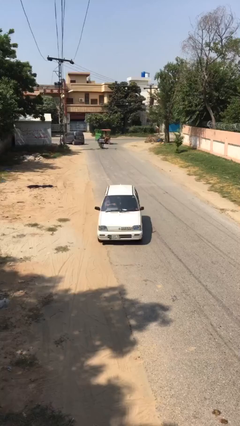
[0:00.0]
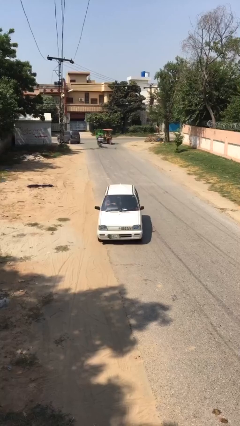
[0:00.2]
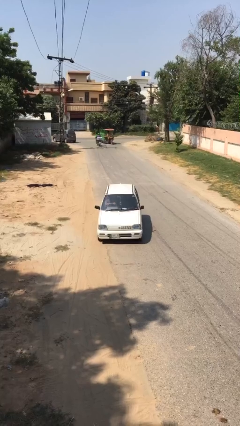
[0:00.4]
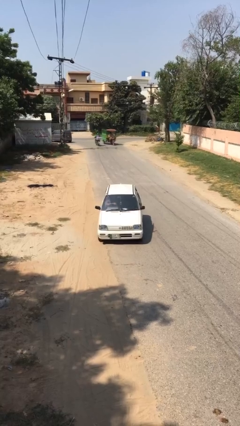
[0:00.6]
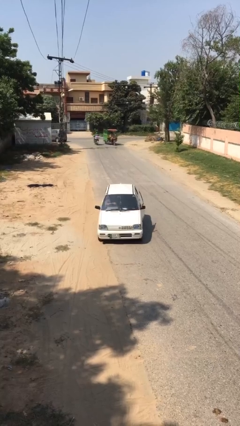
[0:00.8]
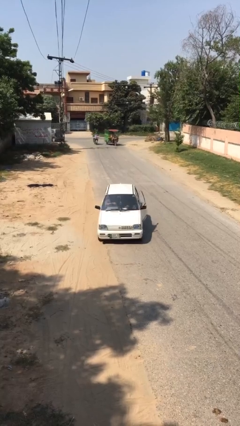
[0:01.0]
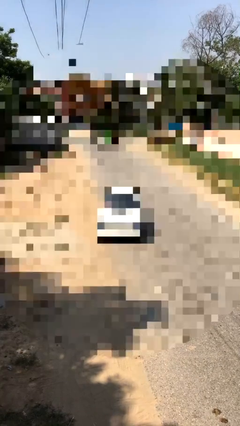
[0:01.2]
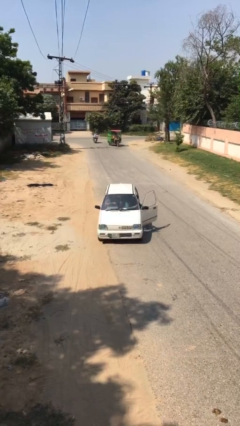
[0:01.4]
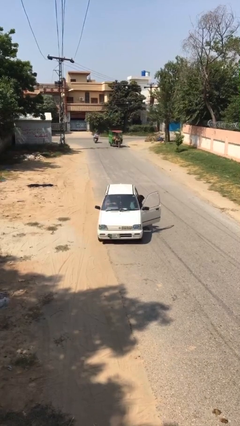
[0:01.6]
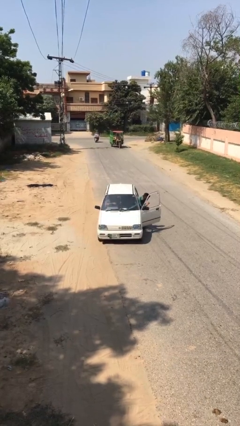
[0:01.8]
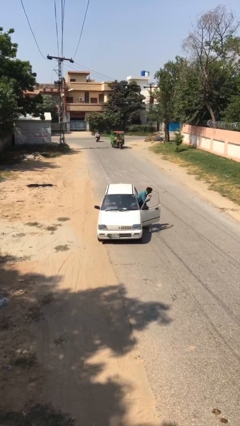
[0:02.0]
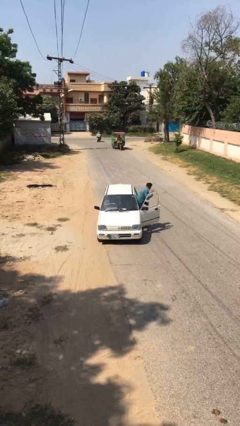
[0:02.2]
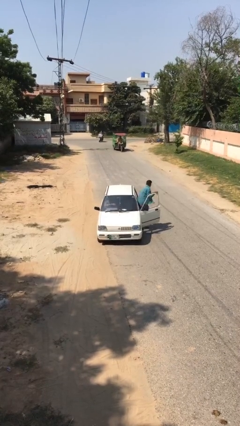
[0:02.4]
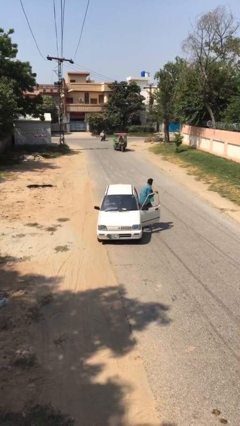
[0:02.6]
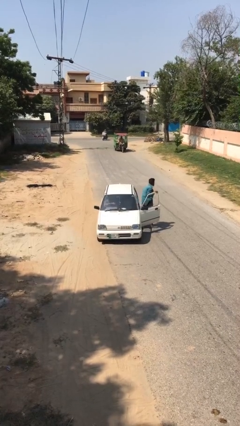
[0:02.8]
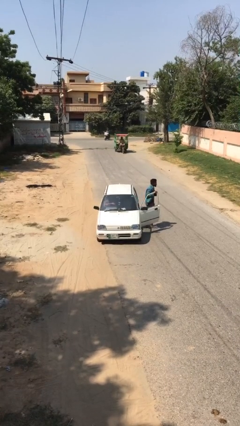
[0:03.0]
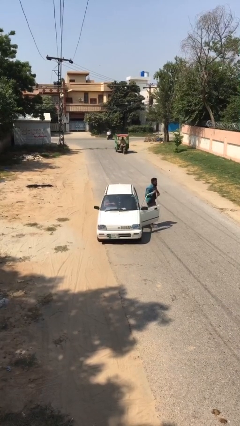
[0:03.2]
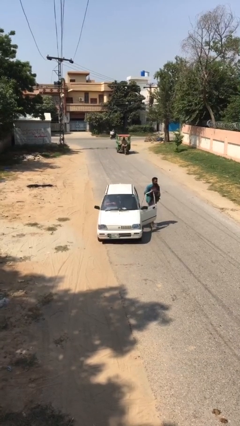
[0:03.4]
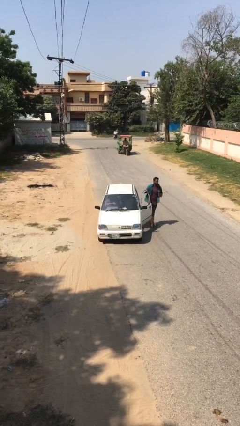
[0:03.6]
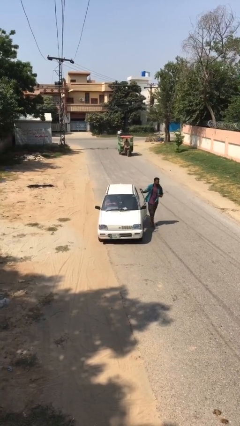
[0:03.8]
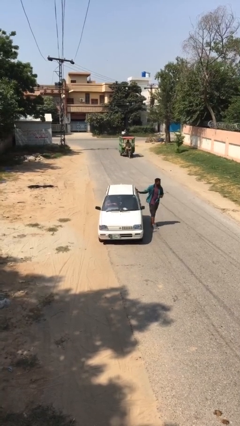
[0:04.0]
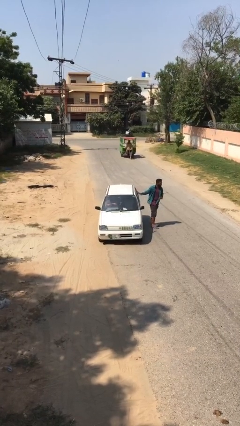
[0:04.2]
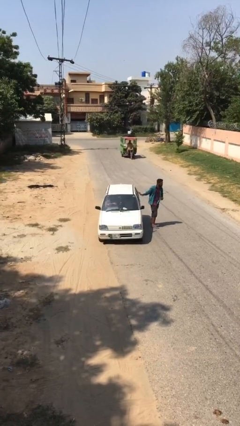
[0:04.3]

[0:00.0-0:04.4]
car drops off person

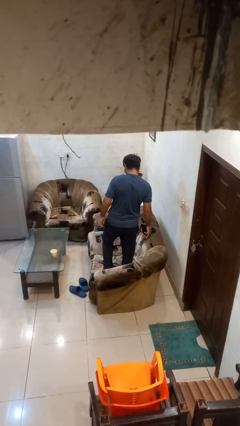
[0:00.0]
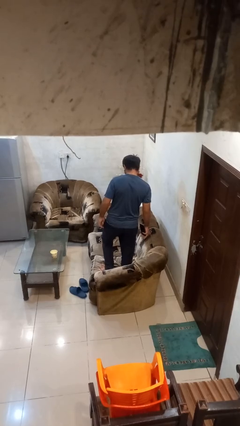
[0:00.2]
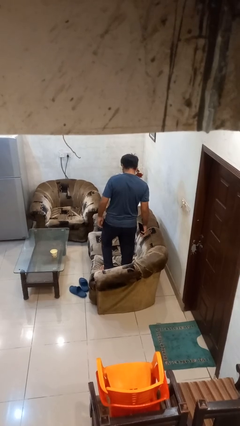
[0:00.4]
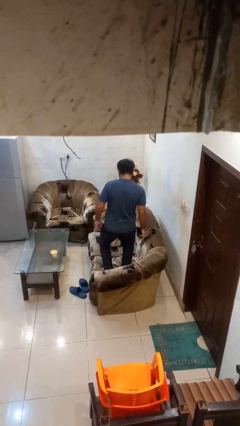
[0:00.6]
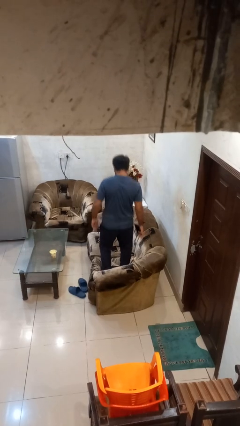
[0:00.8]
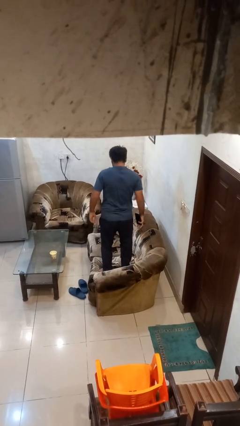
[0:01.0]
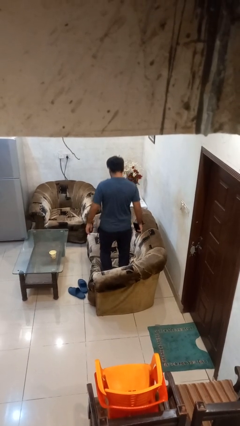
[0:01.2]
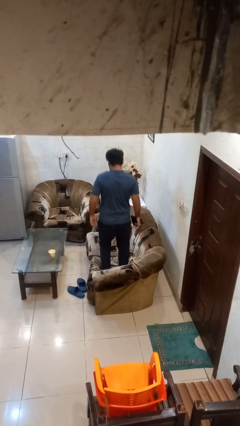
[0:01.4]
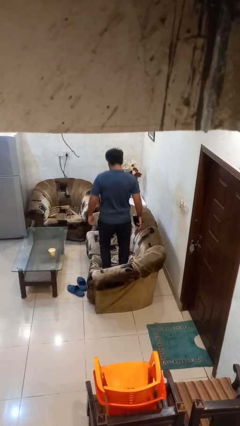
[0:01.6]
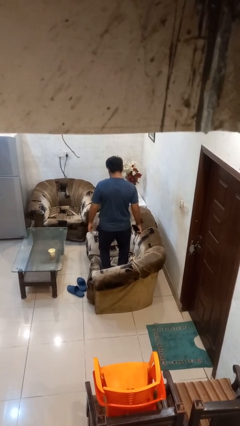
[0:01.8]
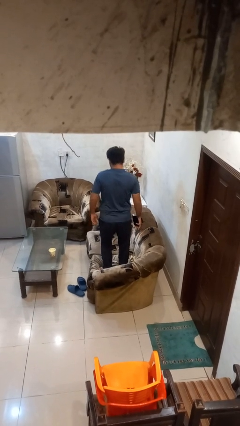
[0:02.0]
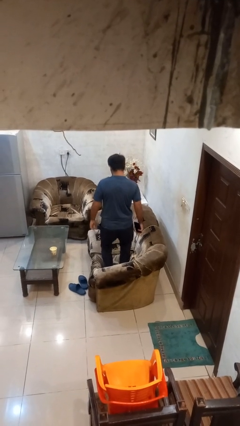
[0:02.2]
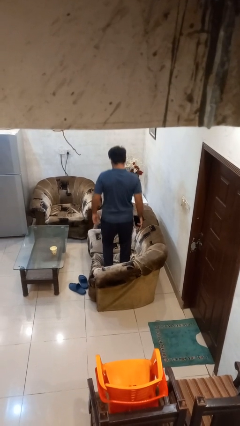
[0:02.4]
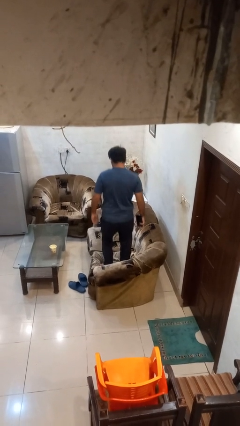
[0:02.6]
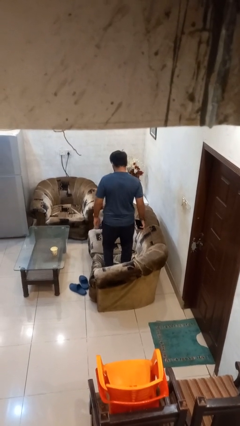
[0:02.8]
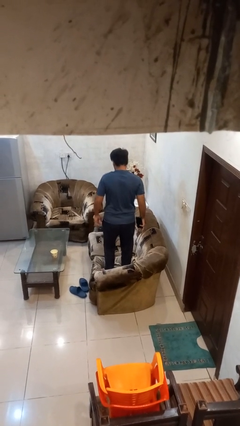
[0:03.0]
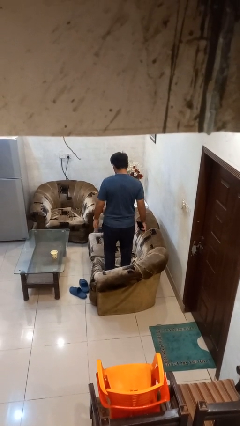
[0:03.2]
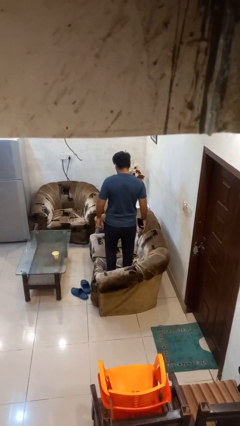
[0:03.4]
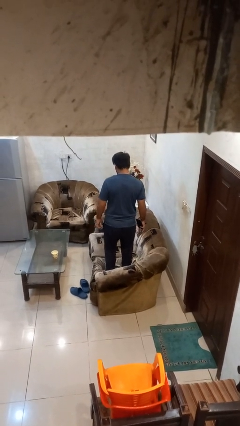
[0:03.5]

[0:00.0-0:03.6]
person jumps on couch

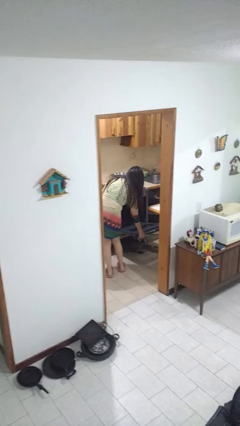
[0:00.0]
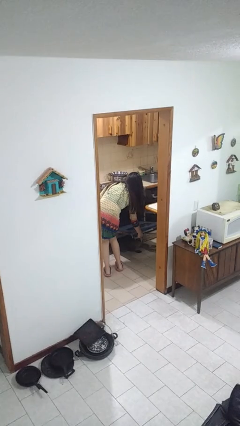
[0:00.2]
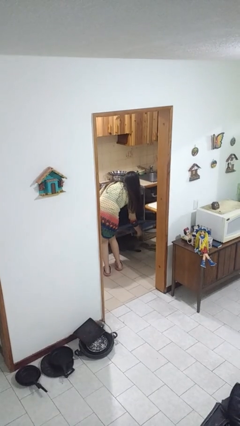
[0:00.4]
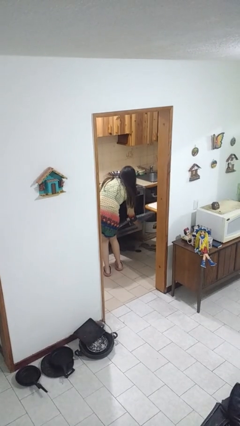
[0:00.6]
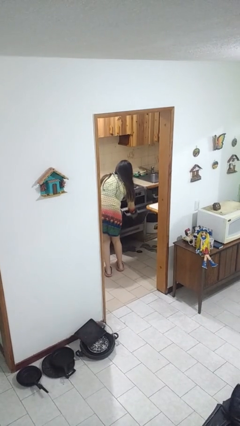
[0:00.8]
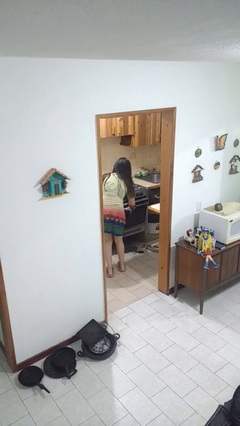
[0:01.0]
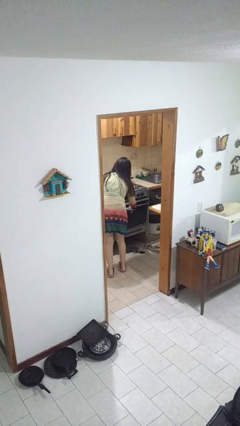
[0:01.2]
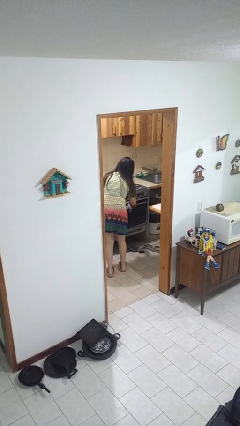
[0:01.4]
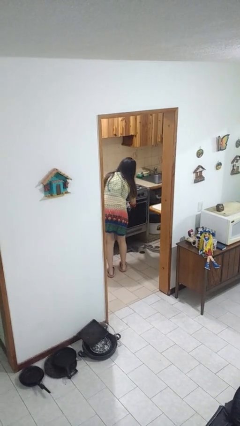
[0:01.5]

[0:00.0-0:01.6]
person closes oven door

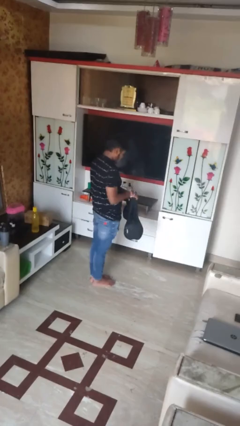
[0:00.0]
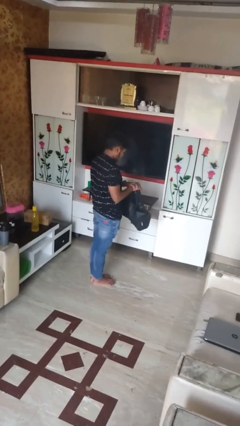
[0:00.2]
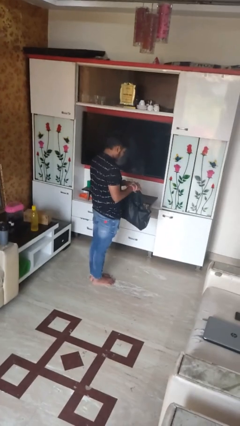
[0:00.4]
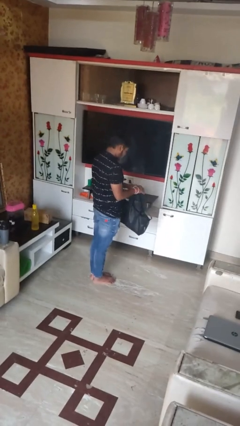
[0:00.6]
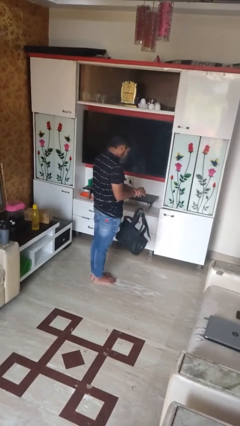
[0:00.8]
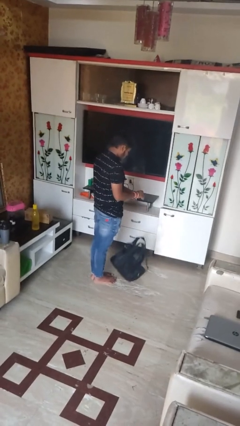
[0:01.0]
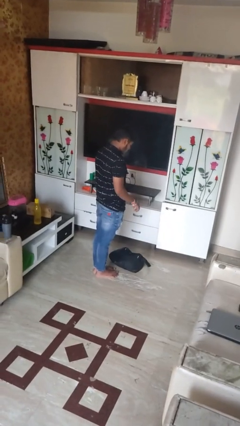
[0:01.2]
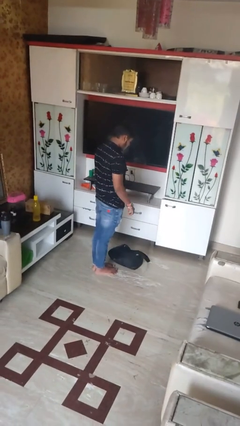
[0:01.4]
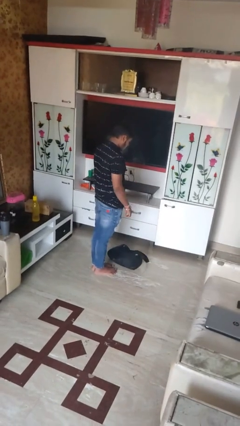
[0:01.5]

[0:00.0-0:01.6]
person drops object

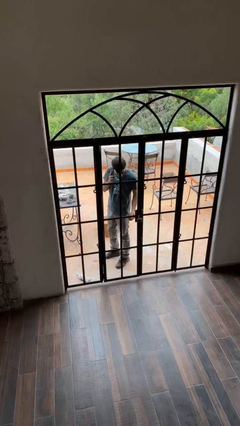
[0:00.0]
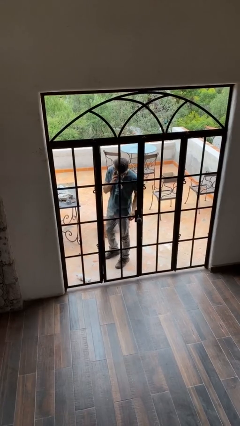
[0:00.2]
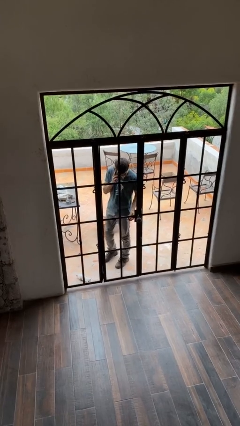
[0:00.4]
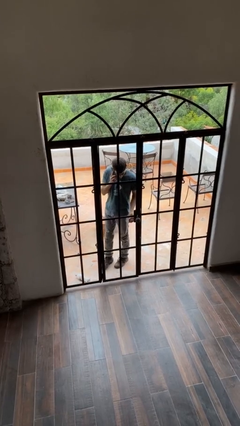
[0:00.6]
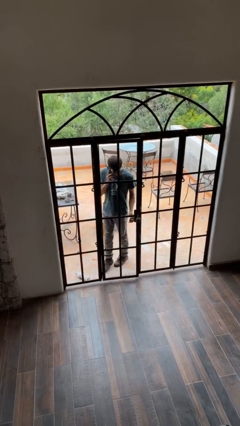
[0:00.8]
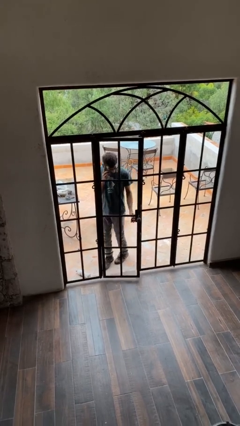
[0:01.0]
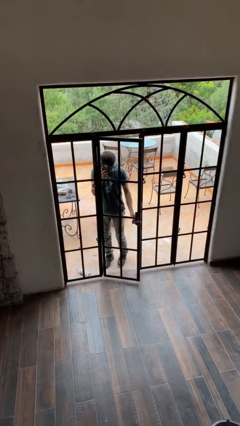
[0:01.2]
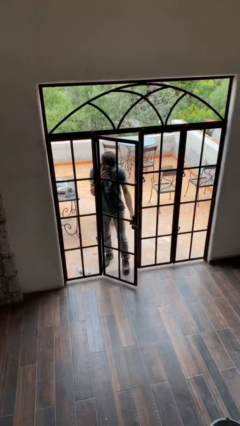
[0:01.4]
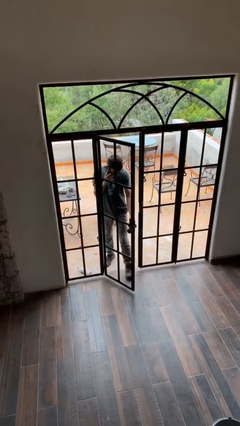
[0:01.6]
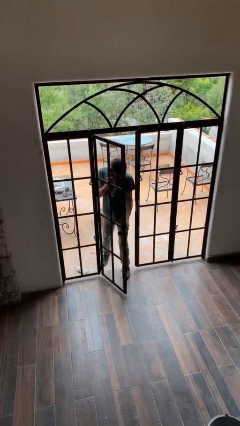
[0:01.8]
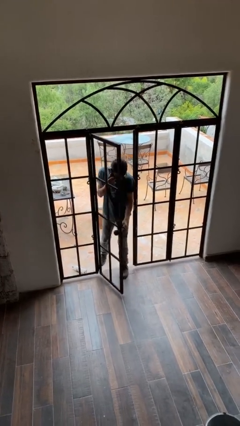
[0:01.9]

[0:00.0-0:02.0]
person opens facility door

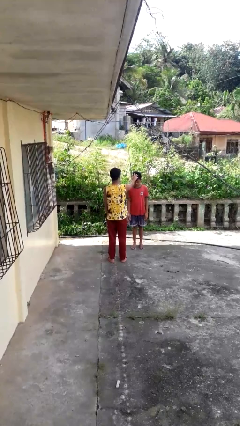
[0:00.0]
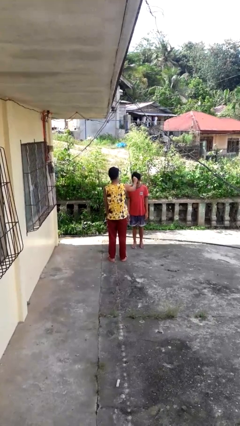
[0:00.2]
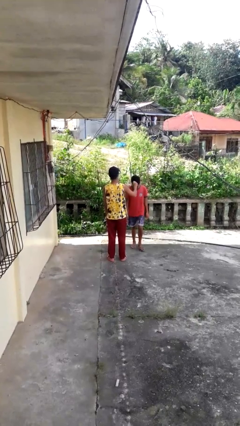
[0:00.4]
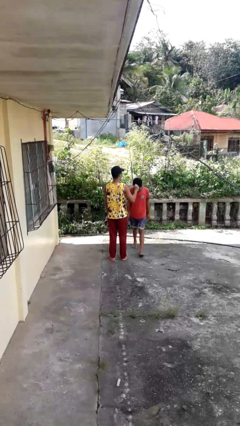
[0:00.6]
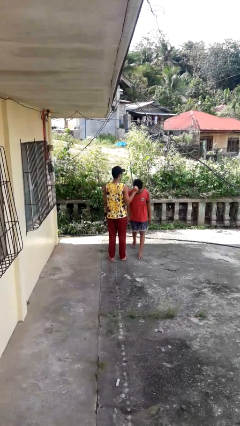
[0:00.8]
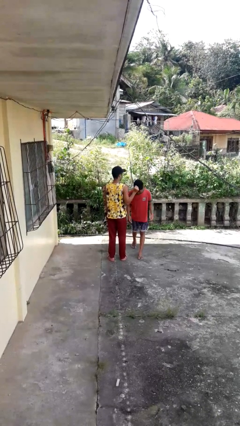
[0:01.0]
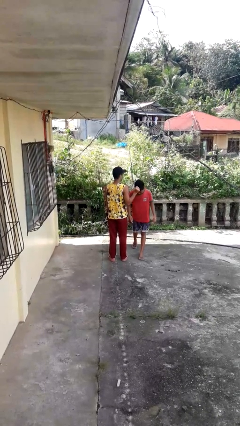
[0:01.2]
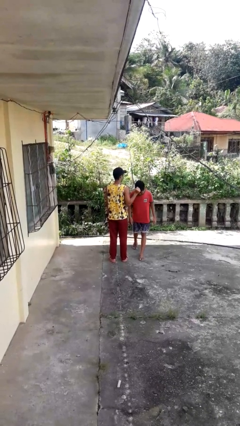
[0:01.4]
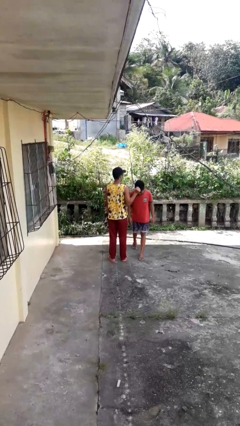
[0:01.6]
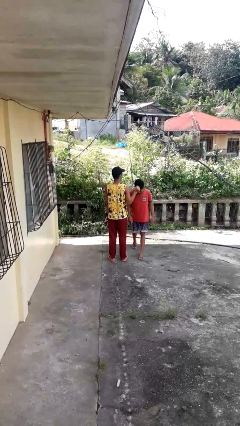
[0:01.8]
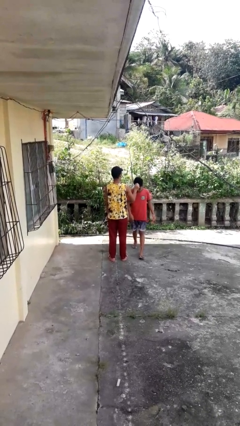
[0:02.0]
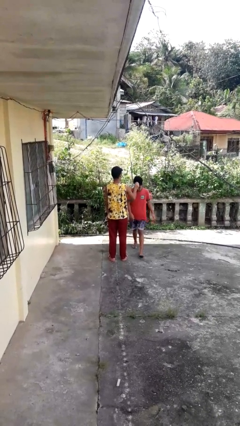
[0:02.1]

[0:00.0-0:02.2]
person grabs person by hair

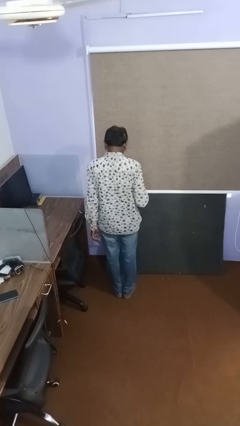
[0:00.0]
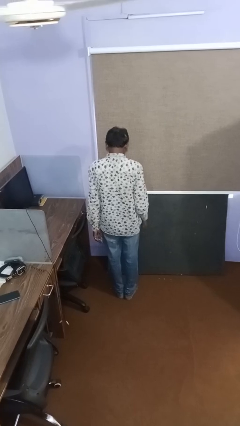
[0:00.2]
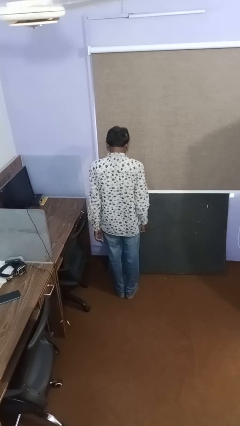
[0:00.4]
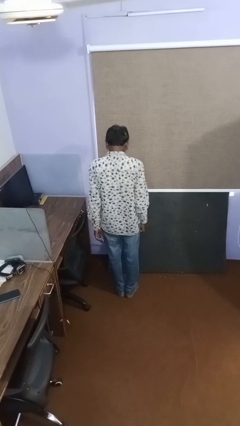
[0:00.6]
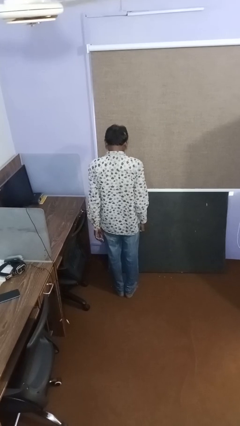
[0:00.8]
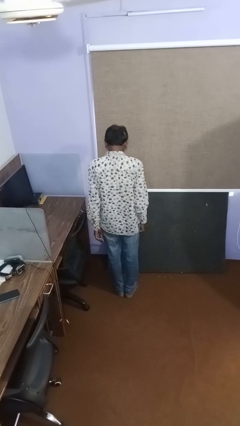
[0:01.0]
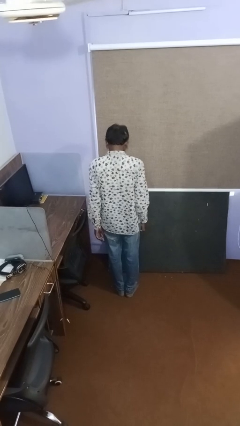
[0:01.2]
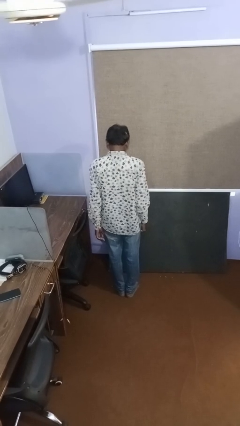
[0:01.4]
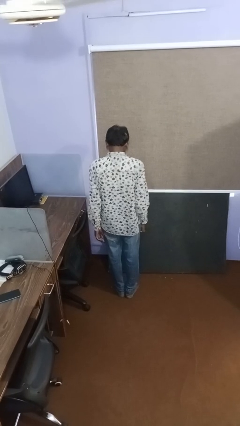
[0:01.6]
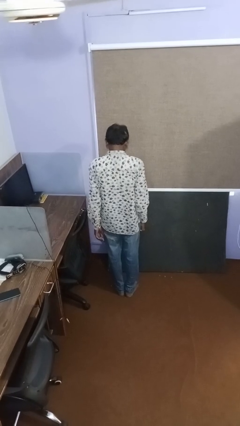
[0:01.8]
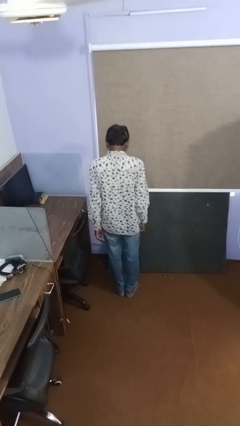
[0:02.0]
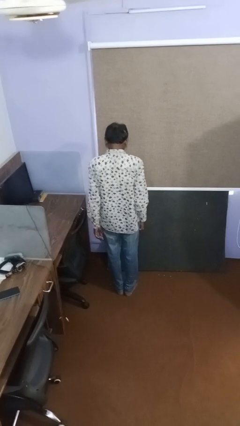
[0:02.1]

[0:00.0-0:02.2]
person gestures thumbs down
